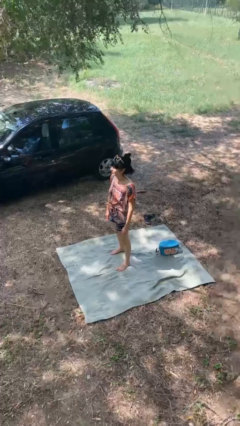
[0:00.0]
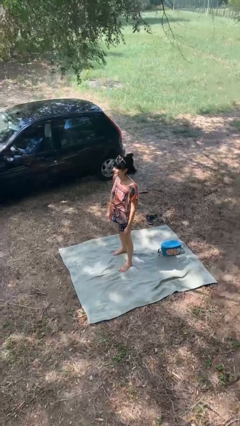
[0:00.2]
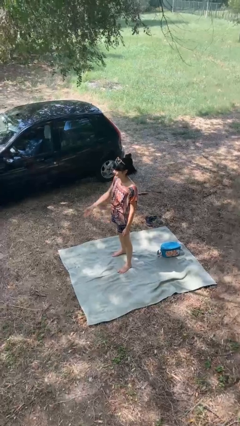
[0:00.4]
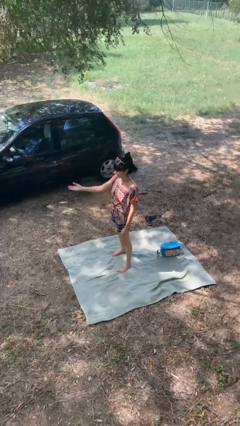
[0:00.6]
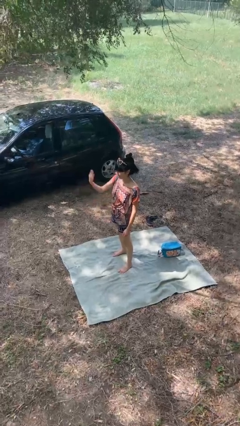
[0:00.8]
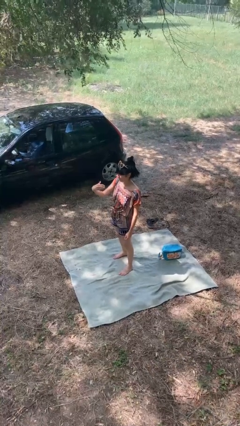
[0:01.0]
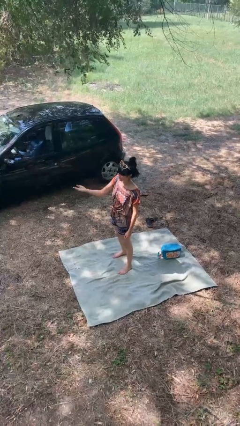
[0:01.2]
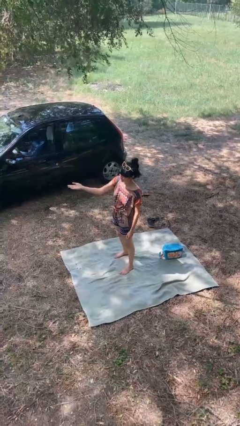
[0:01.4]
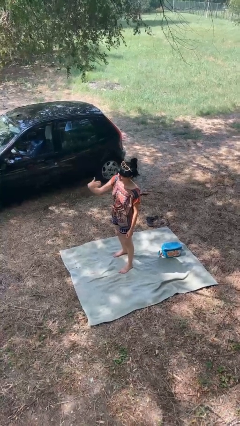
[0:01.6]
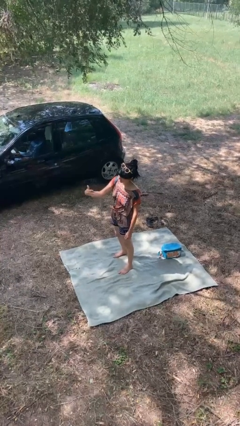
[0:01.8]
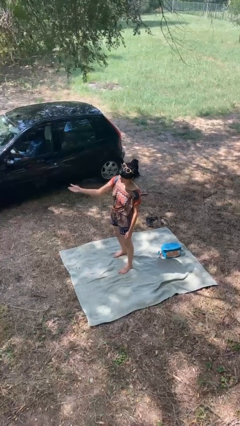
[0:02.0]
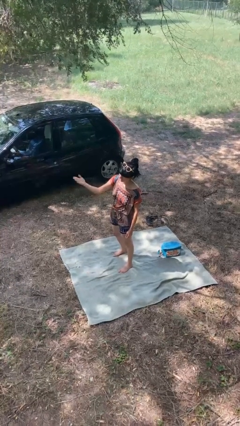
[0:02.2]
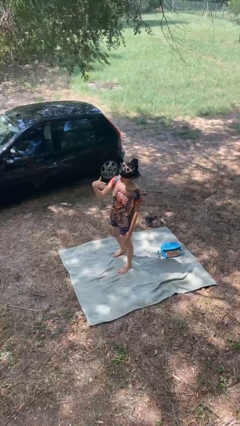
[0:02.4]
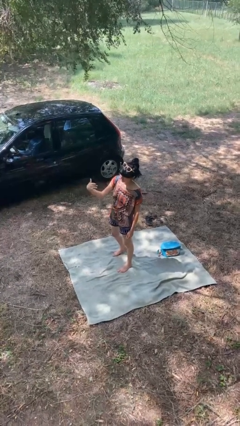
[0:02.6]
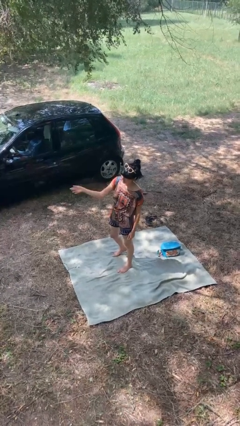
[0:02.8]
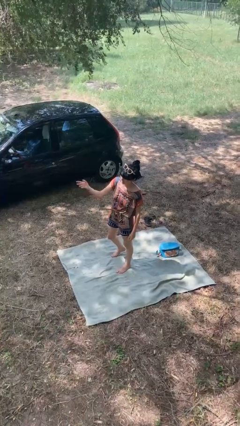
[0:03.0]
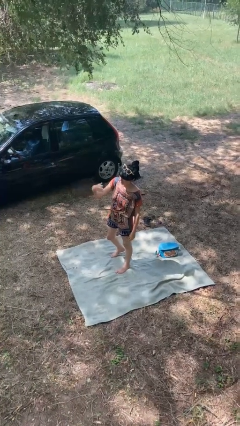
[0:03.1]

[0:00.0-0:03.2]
person gestures come here

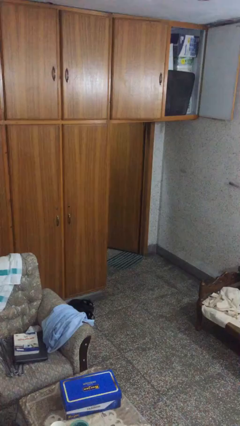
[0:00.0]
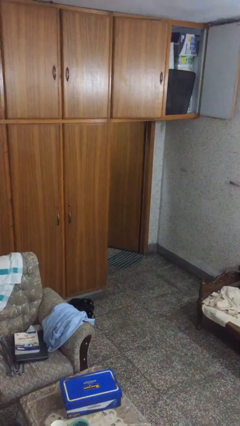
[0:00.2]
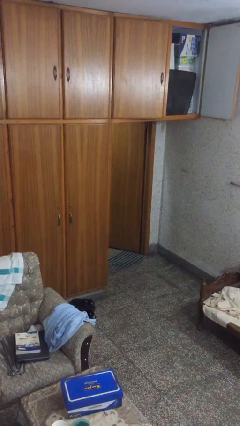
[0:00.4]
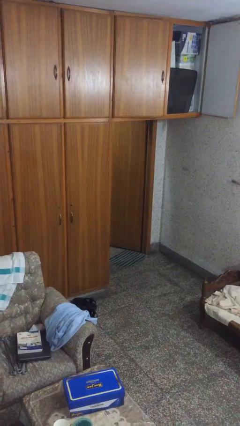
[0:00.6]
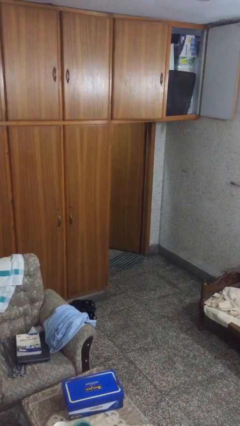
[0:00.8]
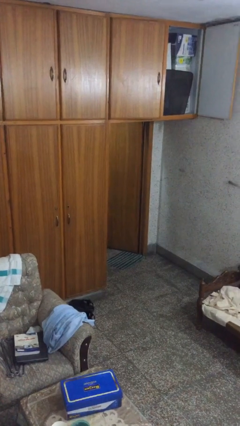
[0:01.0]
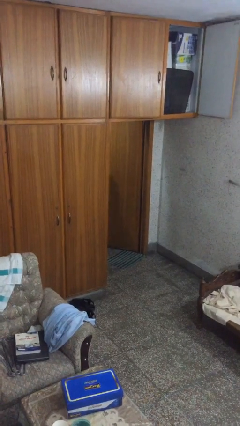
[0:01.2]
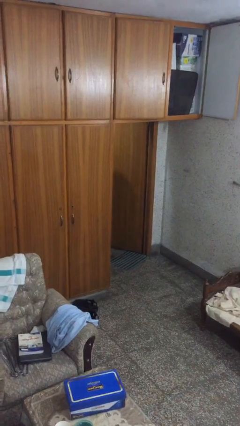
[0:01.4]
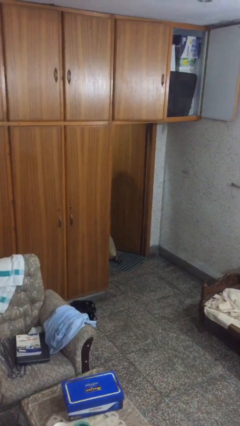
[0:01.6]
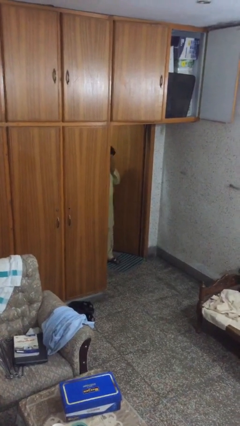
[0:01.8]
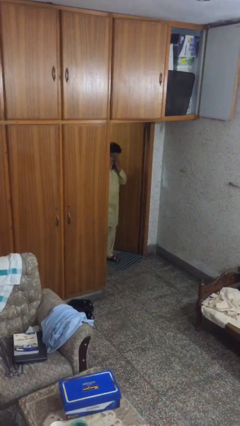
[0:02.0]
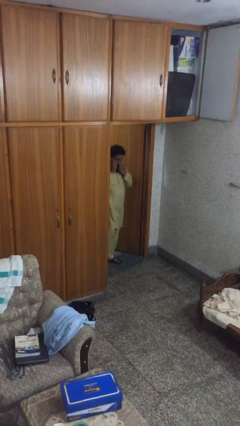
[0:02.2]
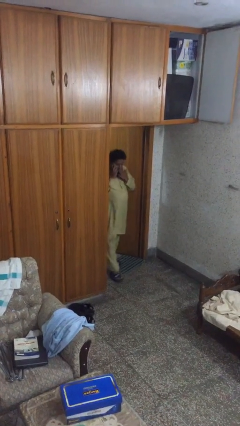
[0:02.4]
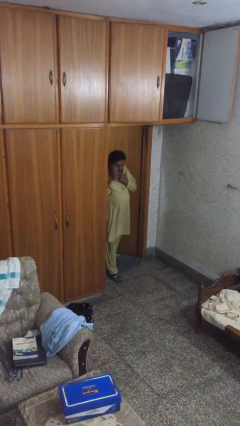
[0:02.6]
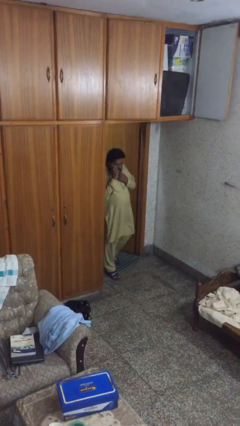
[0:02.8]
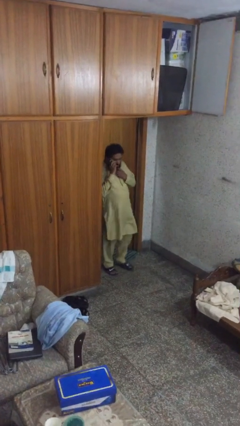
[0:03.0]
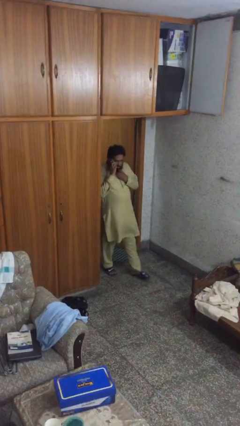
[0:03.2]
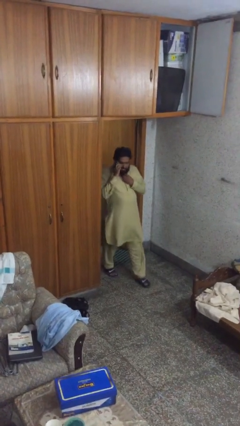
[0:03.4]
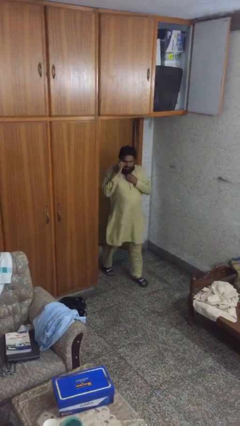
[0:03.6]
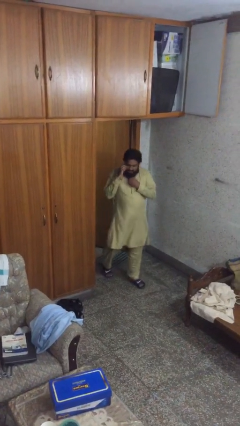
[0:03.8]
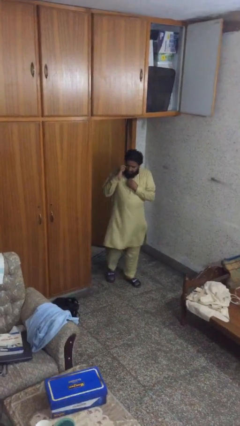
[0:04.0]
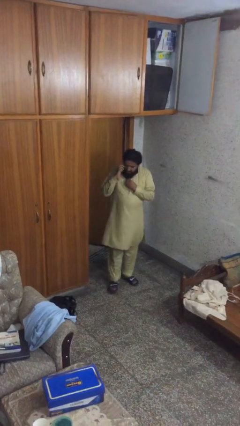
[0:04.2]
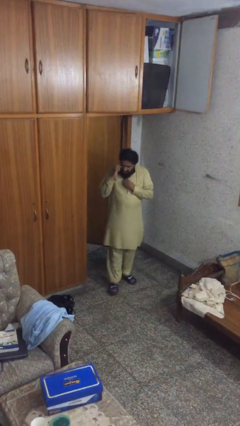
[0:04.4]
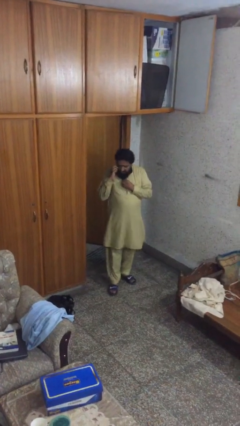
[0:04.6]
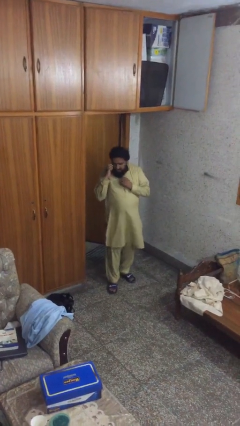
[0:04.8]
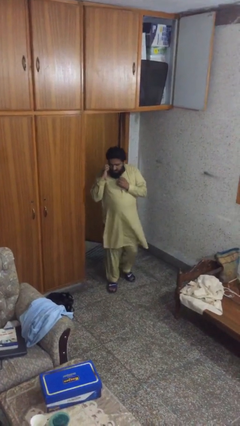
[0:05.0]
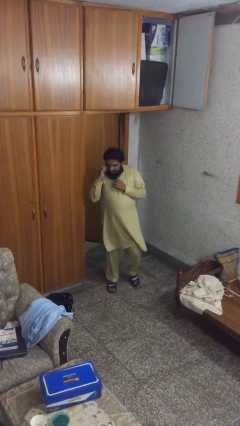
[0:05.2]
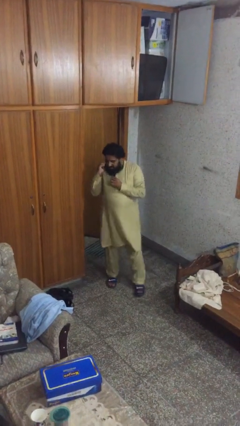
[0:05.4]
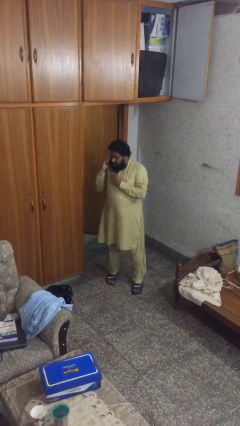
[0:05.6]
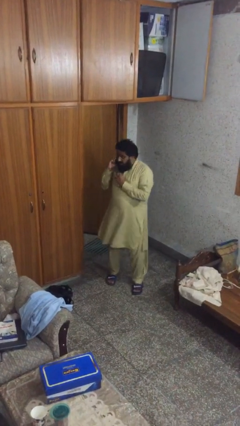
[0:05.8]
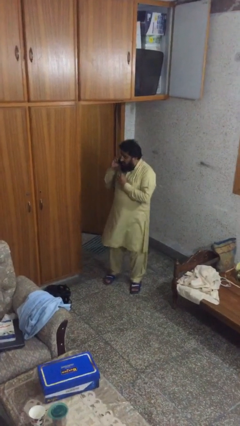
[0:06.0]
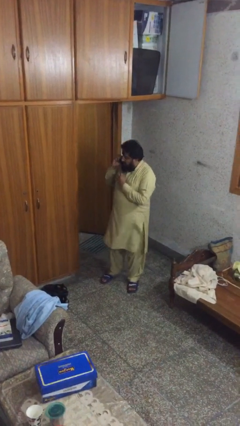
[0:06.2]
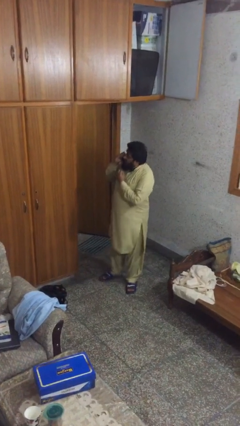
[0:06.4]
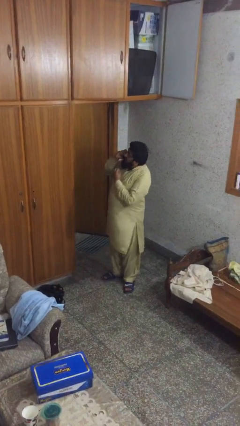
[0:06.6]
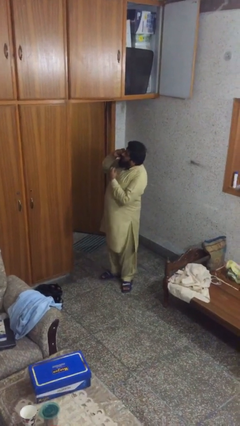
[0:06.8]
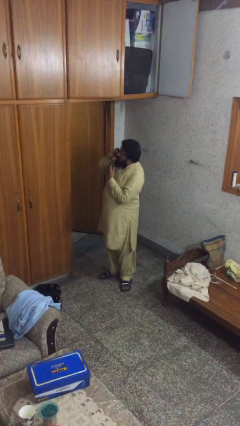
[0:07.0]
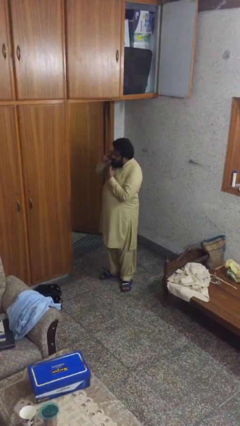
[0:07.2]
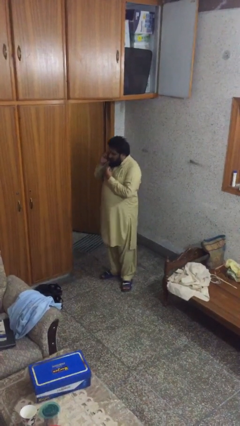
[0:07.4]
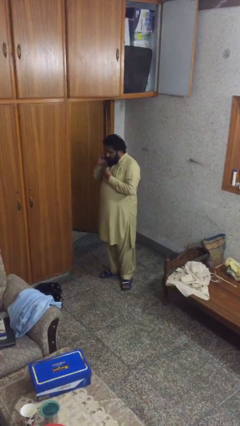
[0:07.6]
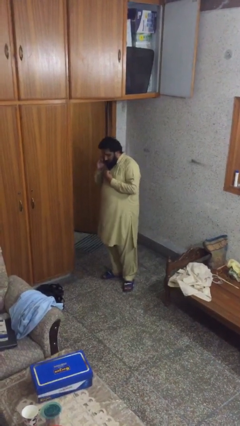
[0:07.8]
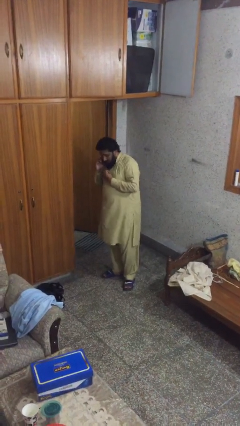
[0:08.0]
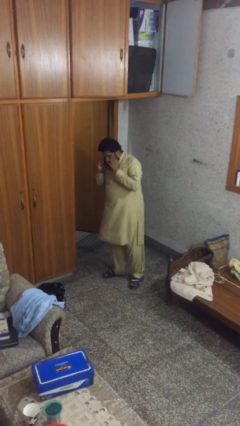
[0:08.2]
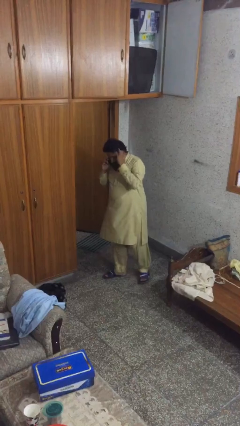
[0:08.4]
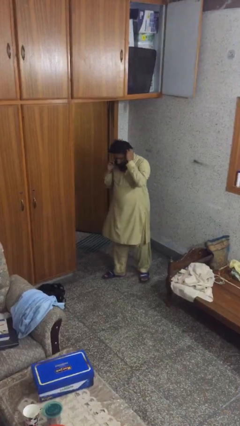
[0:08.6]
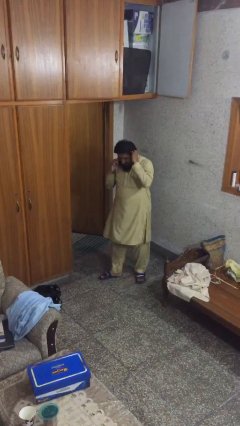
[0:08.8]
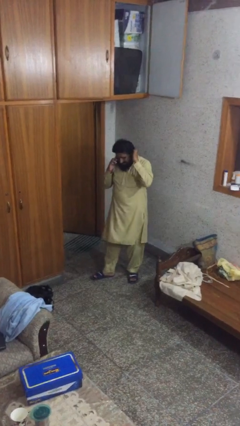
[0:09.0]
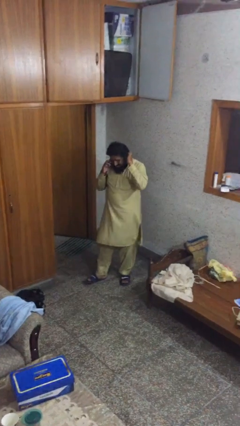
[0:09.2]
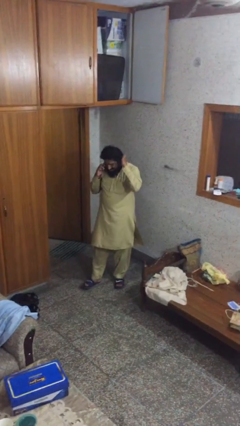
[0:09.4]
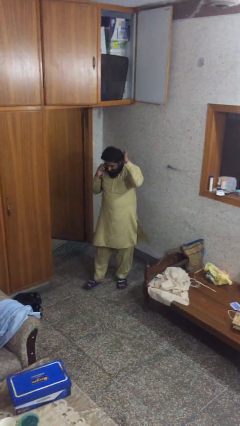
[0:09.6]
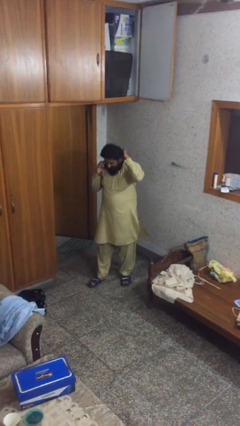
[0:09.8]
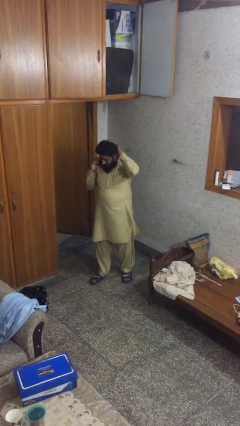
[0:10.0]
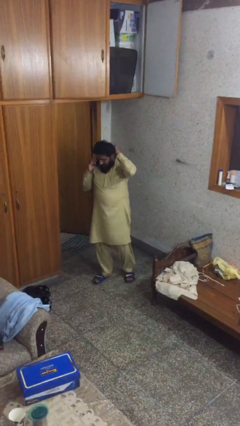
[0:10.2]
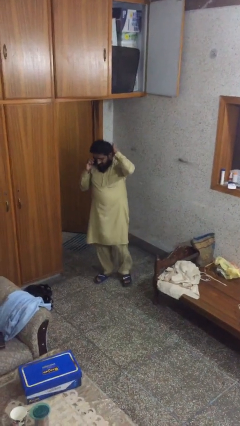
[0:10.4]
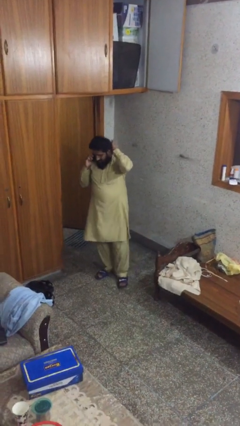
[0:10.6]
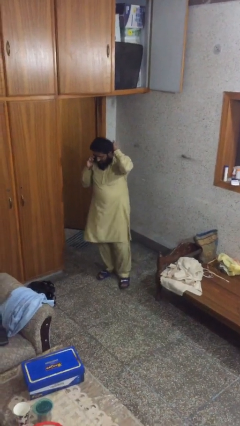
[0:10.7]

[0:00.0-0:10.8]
person enters scene through structure

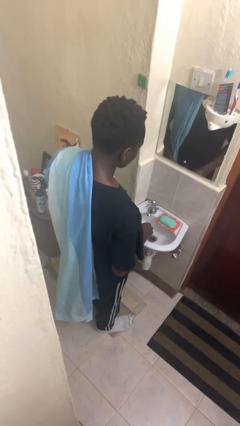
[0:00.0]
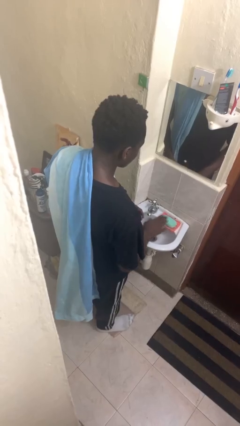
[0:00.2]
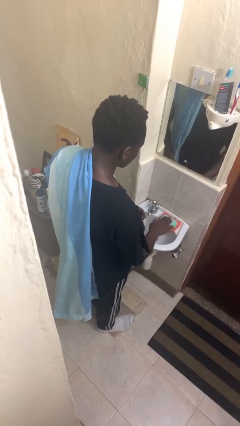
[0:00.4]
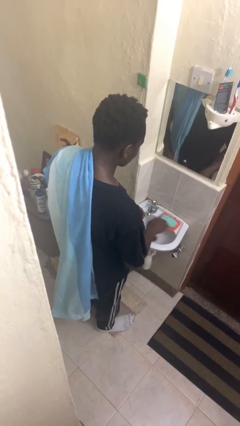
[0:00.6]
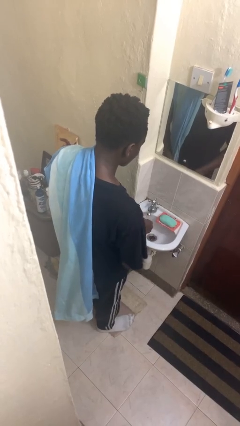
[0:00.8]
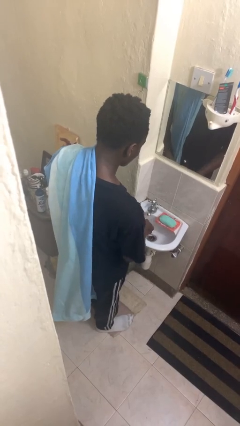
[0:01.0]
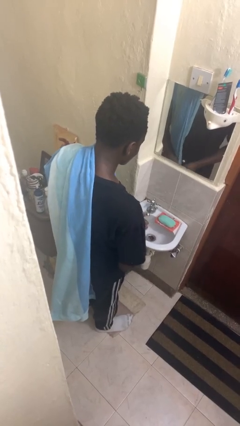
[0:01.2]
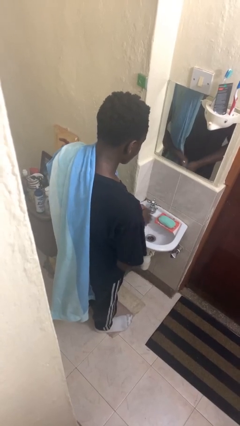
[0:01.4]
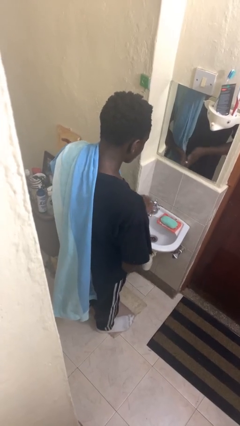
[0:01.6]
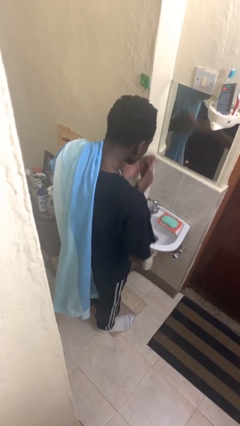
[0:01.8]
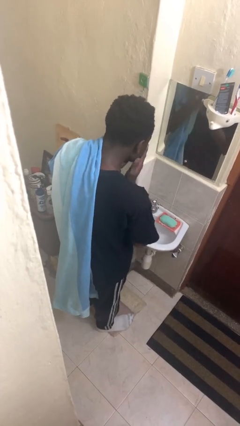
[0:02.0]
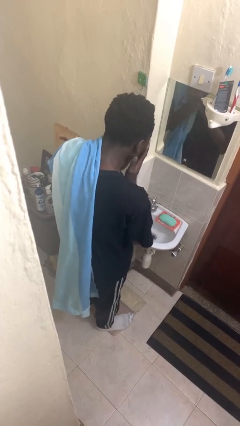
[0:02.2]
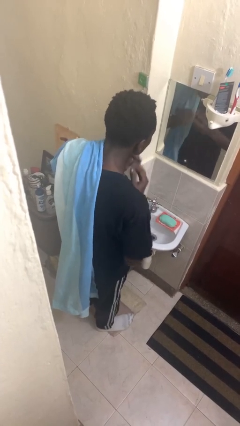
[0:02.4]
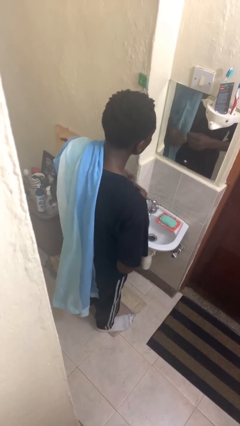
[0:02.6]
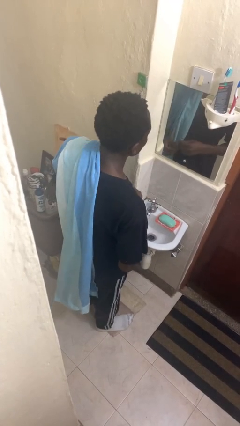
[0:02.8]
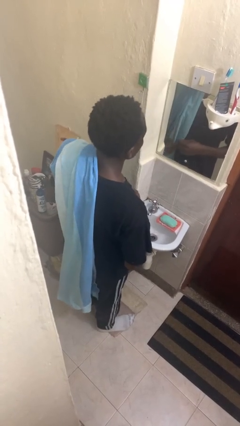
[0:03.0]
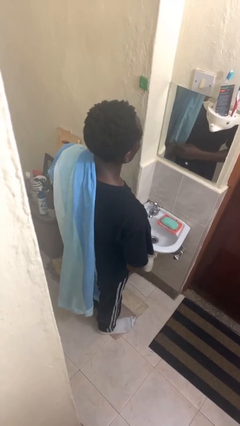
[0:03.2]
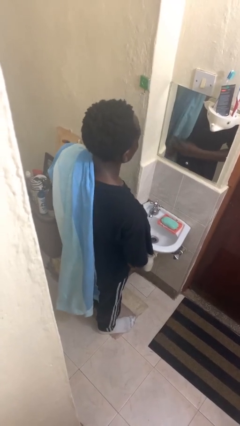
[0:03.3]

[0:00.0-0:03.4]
person washes face

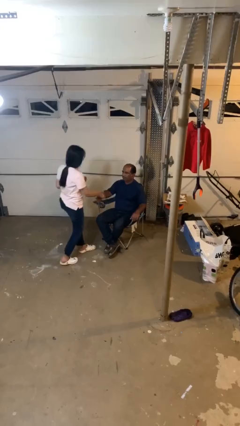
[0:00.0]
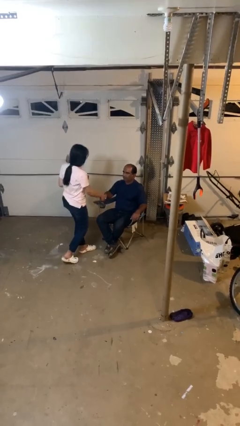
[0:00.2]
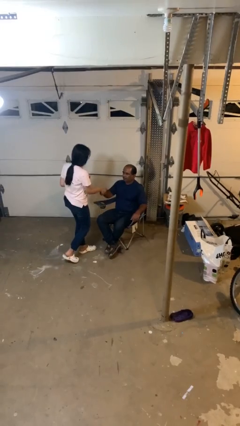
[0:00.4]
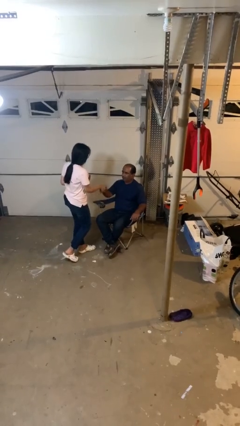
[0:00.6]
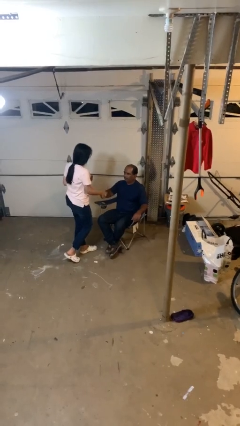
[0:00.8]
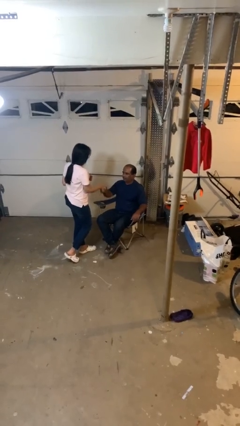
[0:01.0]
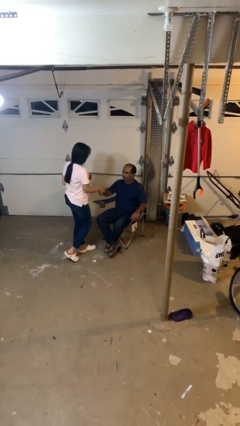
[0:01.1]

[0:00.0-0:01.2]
person shakes hand
